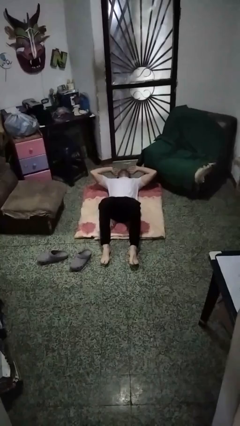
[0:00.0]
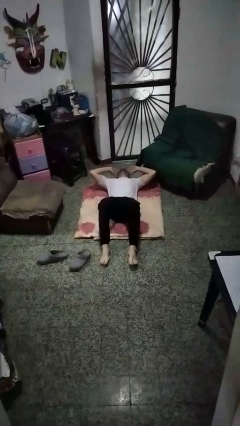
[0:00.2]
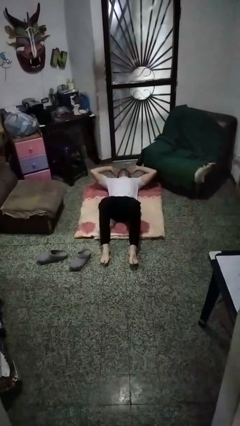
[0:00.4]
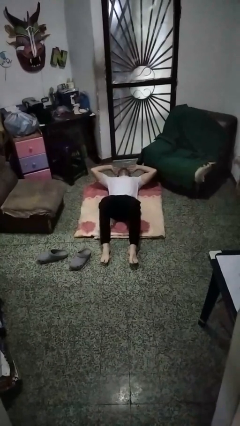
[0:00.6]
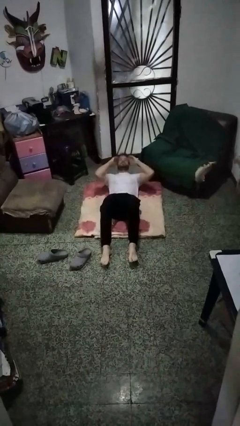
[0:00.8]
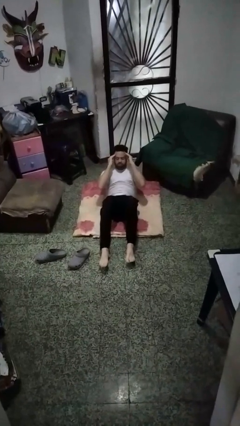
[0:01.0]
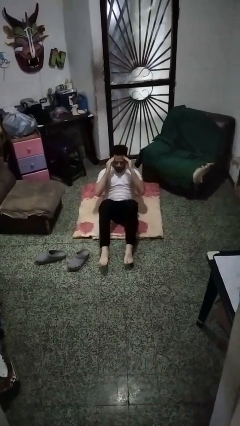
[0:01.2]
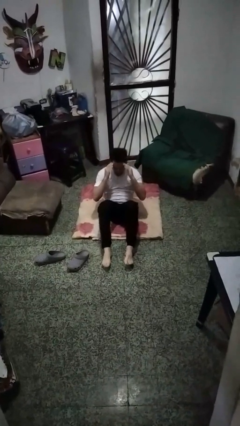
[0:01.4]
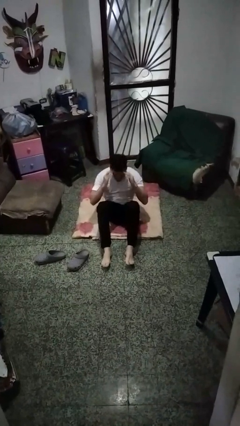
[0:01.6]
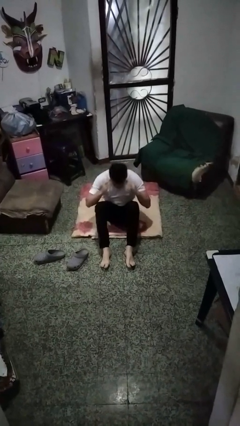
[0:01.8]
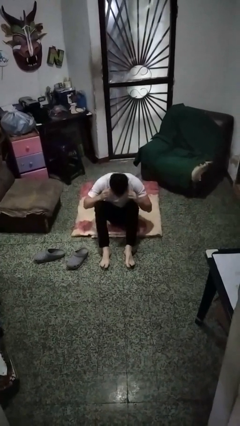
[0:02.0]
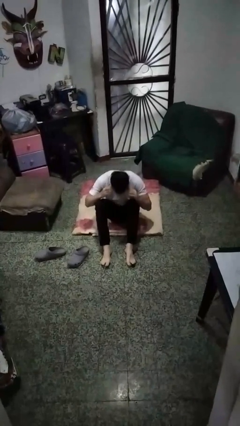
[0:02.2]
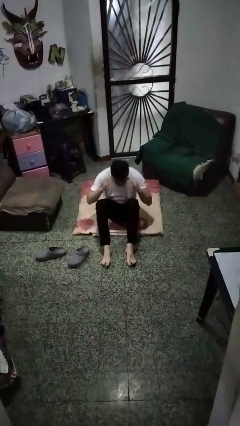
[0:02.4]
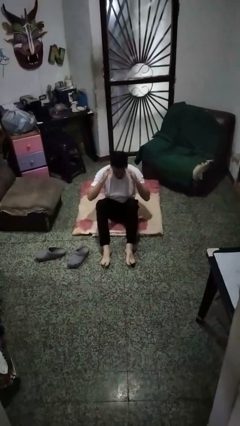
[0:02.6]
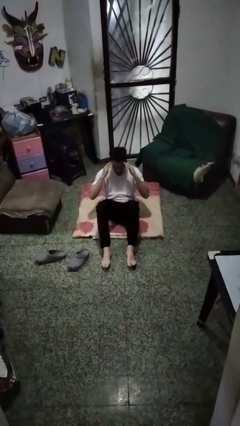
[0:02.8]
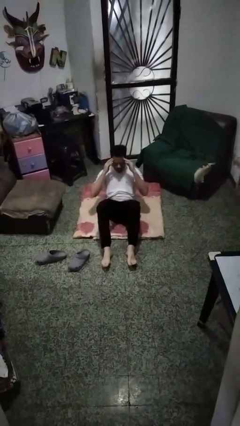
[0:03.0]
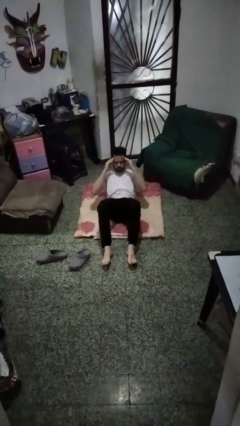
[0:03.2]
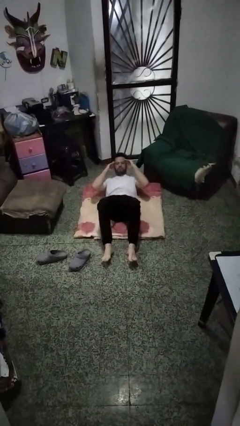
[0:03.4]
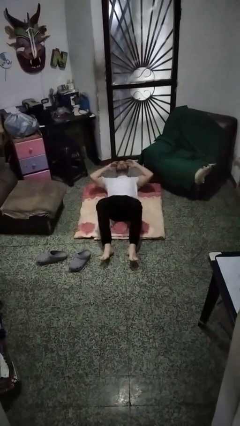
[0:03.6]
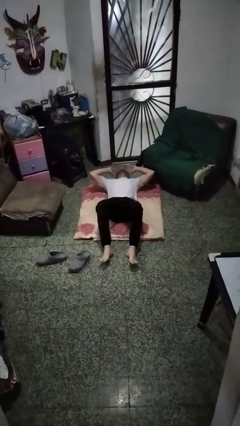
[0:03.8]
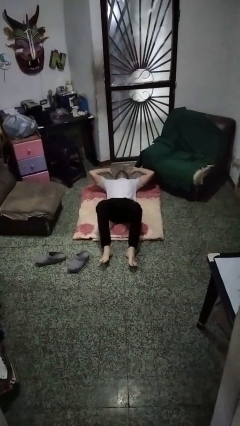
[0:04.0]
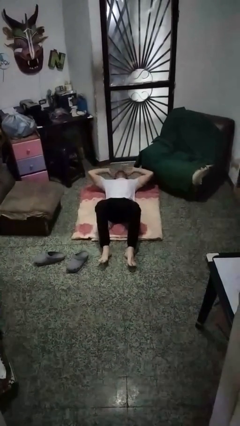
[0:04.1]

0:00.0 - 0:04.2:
person exercises with situp

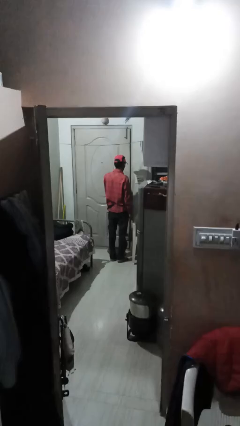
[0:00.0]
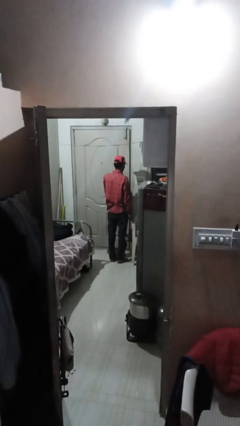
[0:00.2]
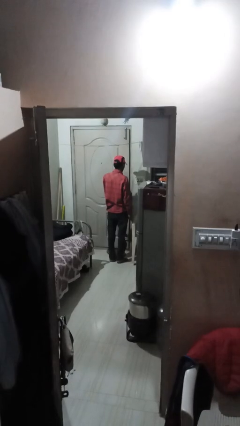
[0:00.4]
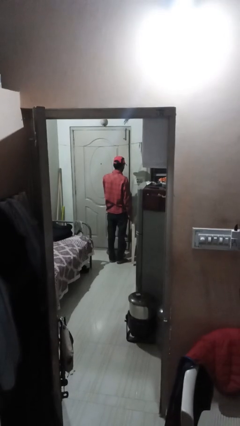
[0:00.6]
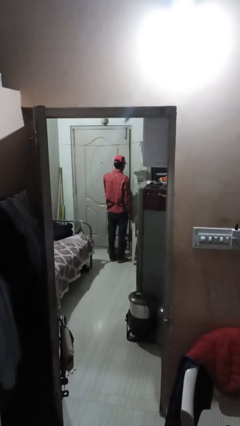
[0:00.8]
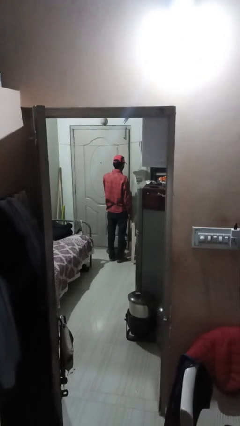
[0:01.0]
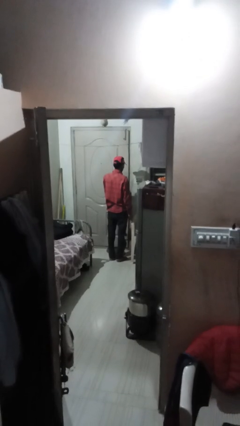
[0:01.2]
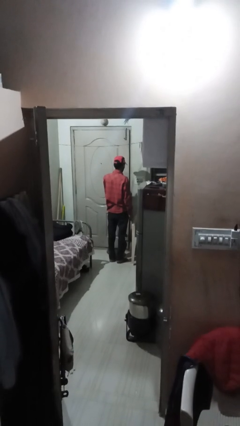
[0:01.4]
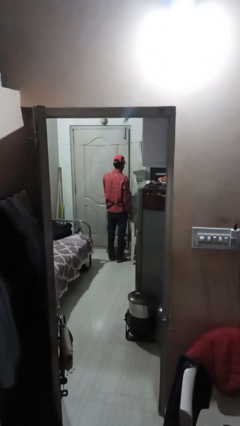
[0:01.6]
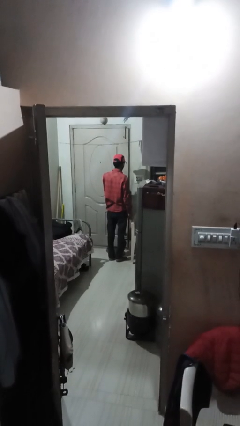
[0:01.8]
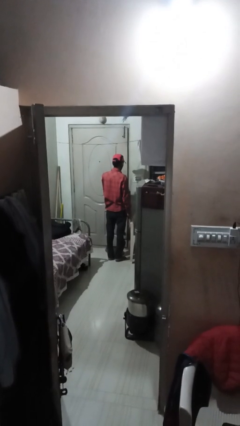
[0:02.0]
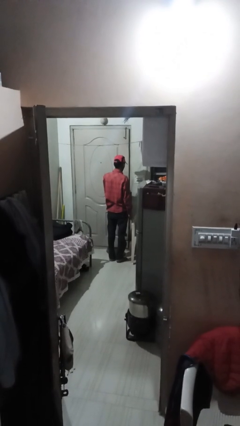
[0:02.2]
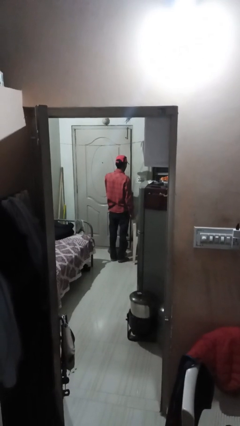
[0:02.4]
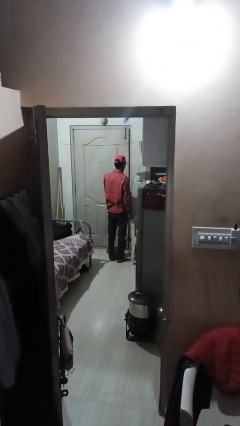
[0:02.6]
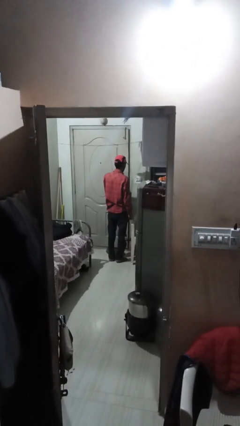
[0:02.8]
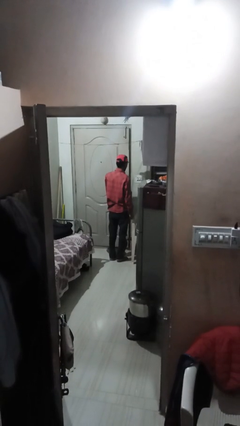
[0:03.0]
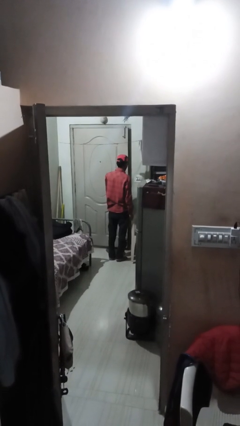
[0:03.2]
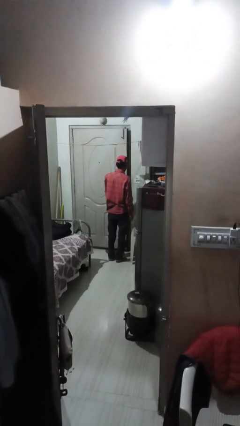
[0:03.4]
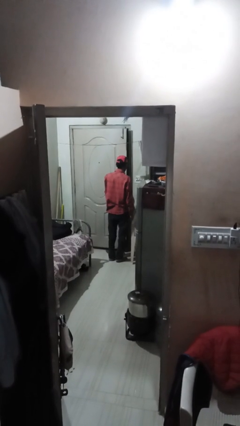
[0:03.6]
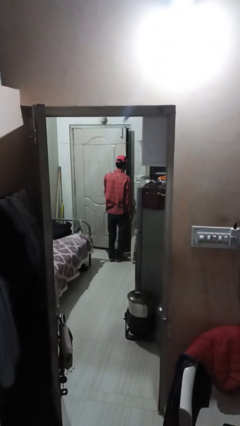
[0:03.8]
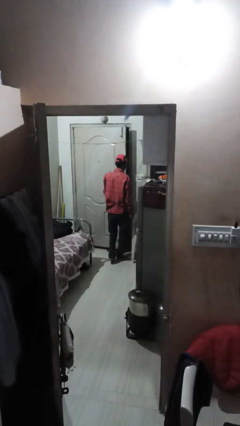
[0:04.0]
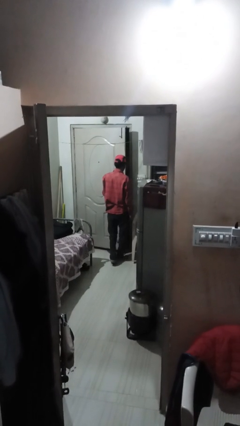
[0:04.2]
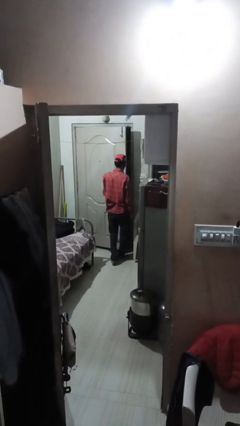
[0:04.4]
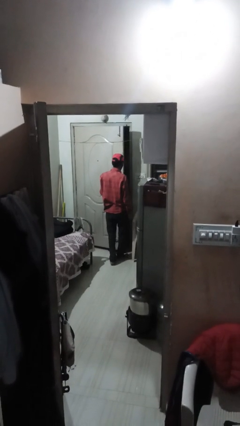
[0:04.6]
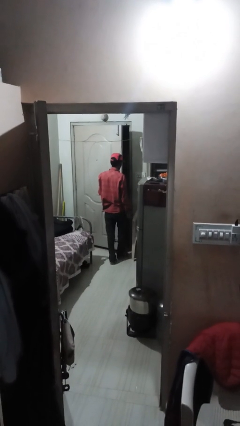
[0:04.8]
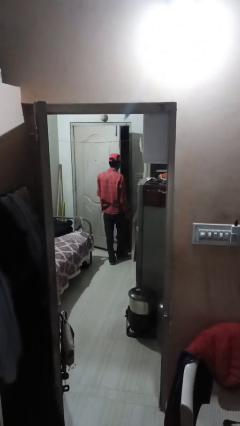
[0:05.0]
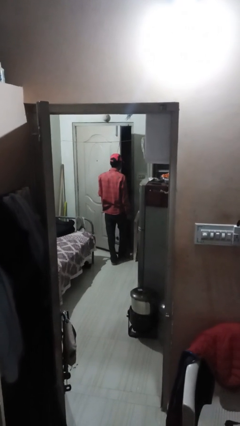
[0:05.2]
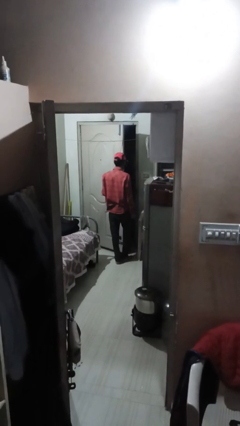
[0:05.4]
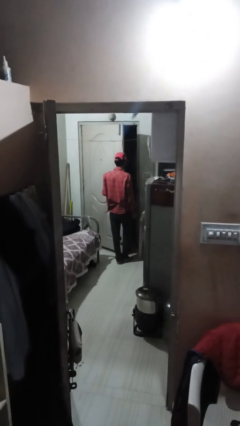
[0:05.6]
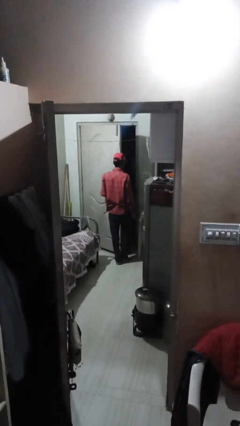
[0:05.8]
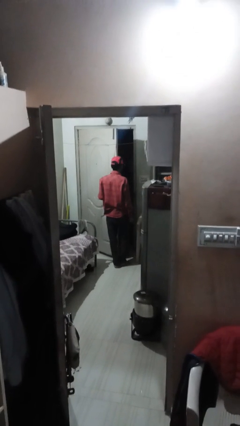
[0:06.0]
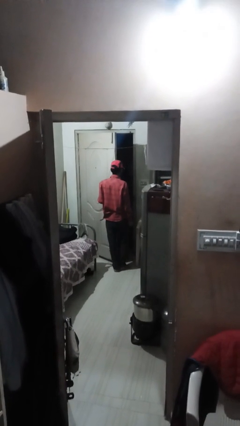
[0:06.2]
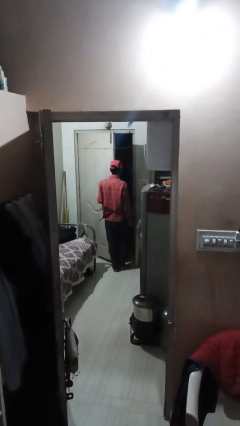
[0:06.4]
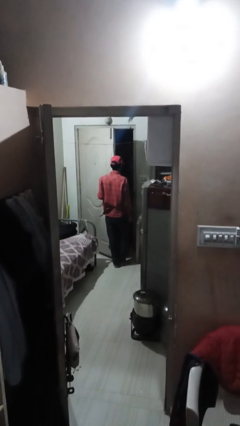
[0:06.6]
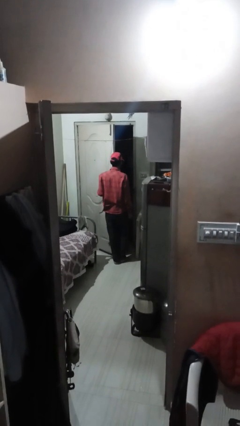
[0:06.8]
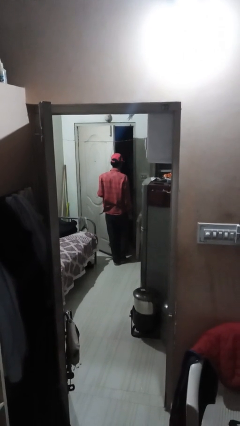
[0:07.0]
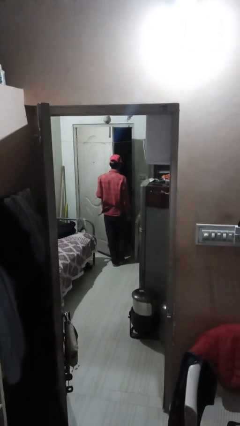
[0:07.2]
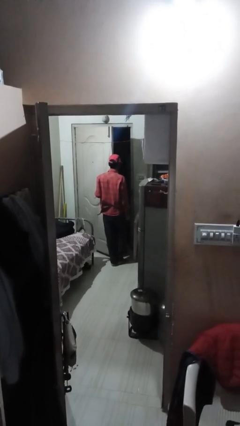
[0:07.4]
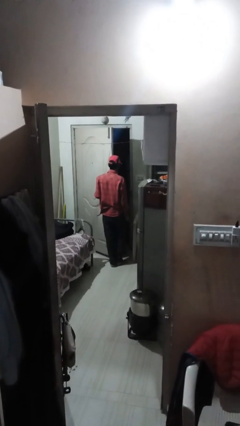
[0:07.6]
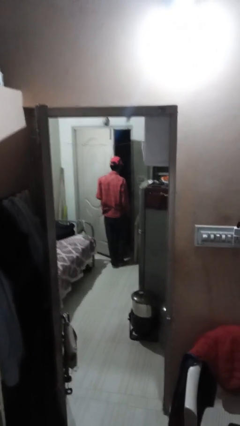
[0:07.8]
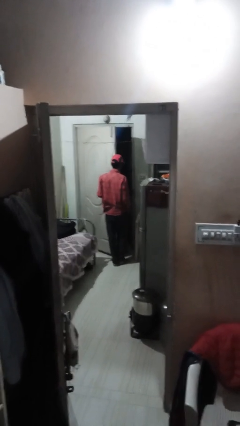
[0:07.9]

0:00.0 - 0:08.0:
person opens facility door

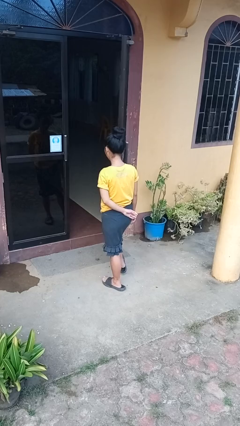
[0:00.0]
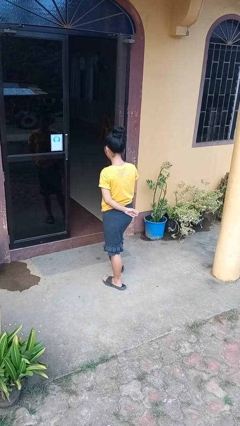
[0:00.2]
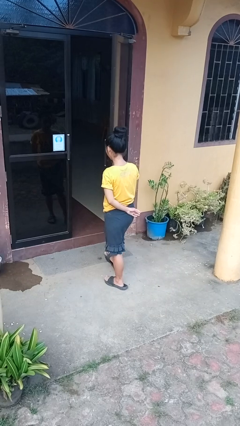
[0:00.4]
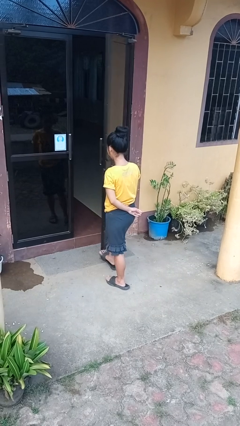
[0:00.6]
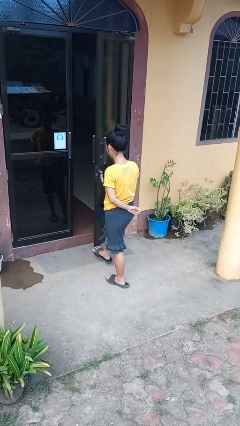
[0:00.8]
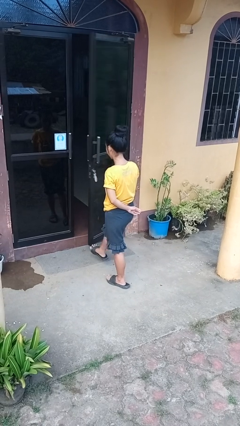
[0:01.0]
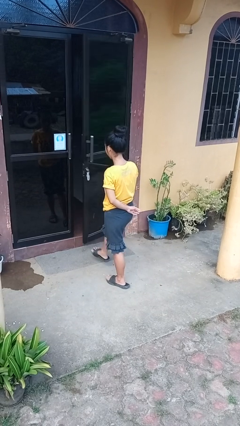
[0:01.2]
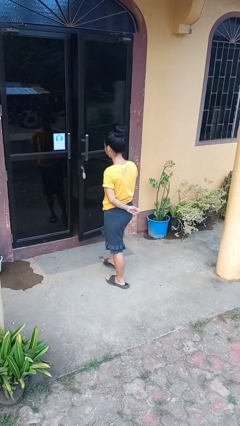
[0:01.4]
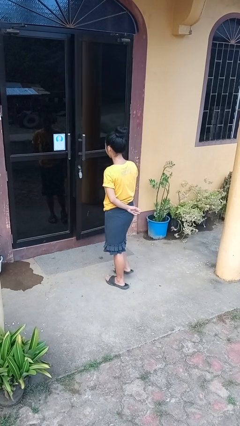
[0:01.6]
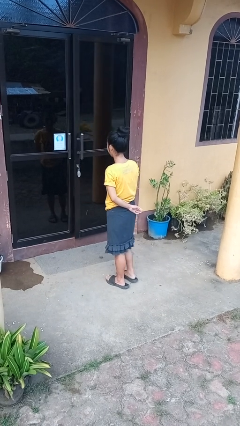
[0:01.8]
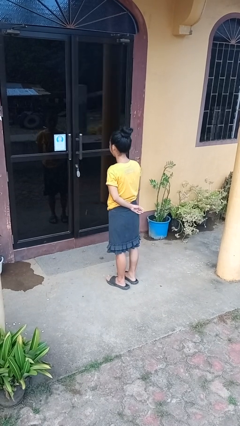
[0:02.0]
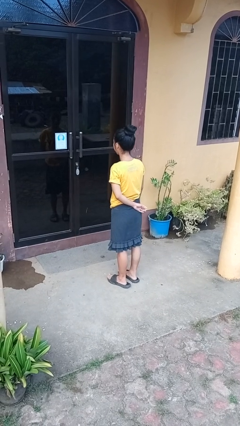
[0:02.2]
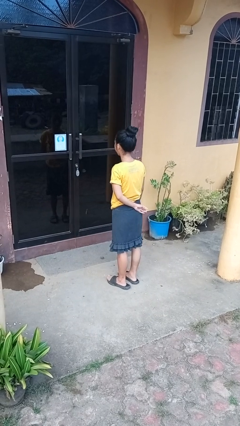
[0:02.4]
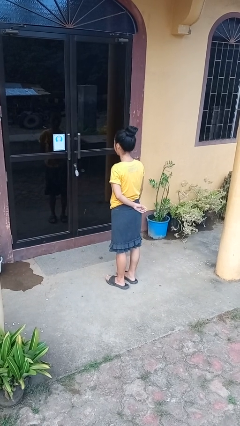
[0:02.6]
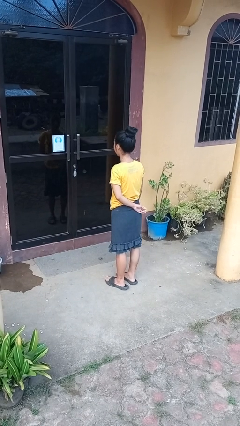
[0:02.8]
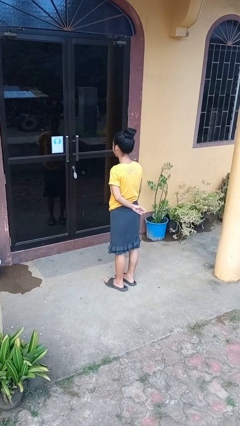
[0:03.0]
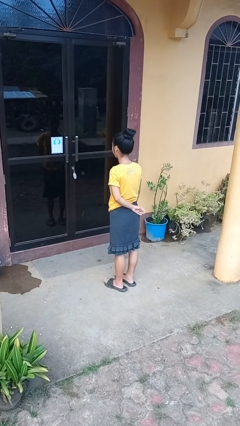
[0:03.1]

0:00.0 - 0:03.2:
person closes door with foot

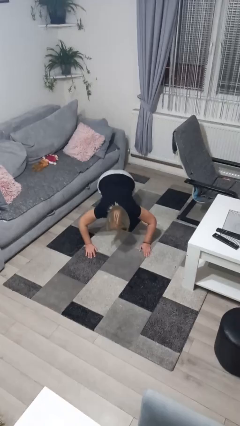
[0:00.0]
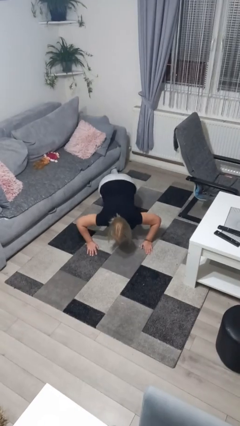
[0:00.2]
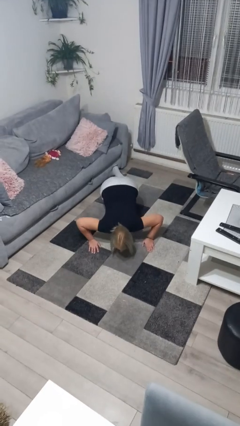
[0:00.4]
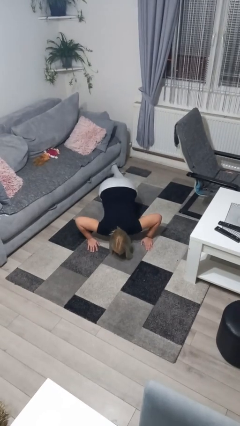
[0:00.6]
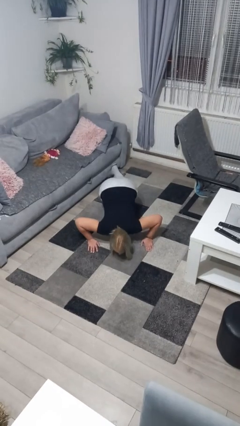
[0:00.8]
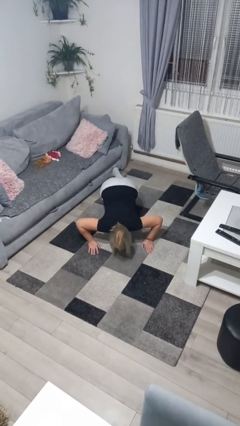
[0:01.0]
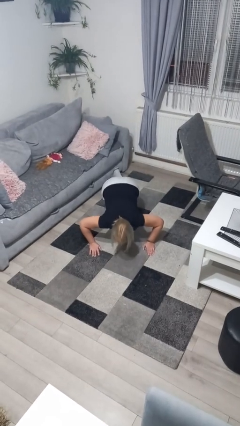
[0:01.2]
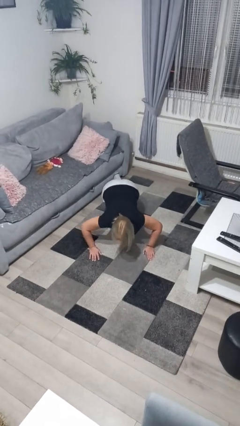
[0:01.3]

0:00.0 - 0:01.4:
person exercises with pushup

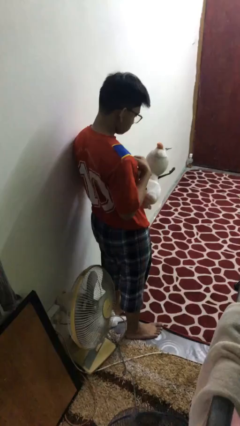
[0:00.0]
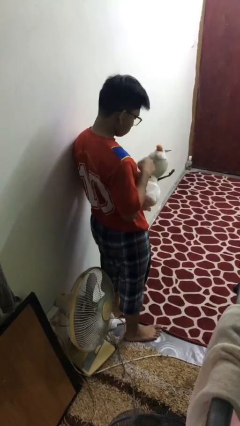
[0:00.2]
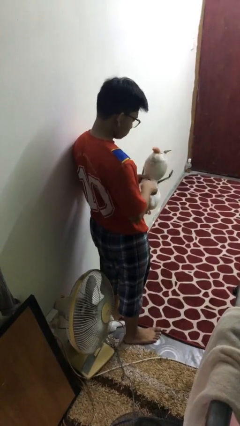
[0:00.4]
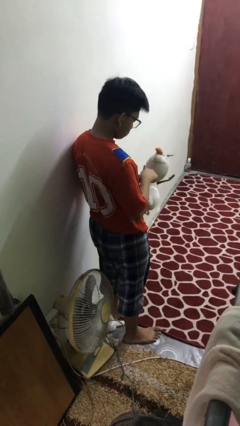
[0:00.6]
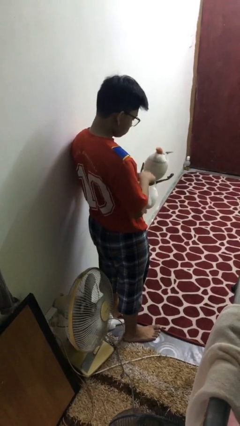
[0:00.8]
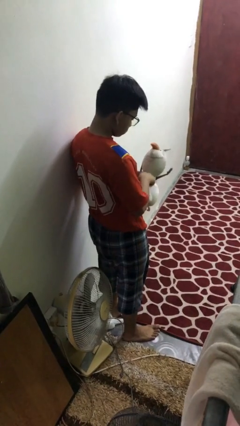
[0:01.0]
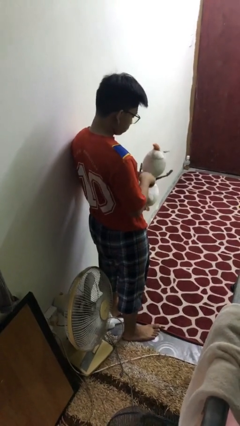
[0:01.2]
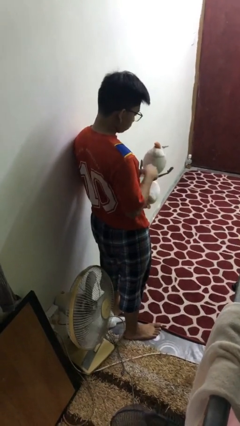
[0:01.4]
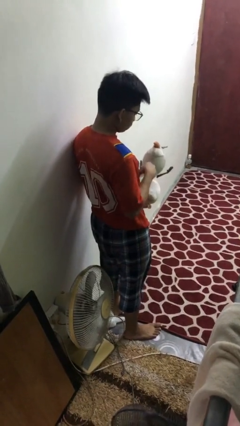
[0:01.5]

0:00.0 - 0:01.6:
person taps object with finger
